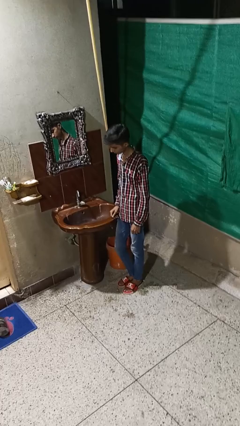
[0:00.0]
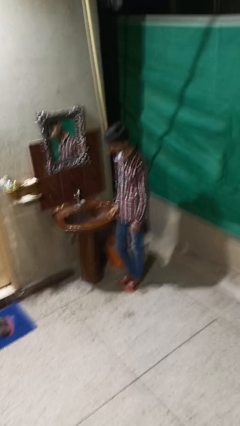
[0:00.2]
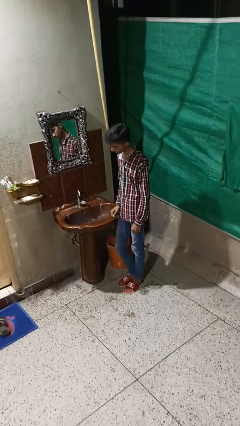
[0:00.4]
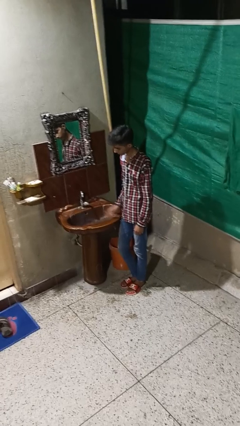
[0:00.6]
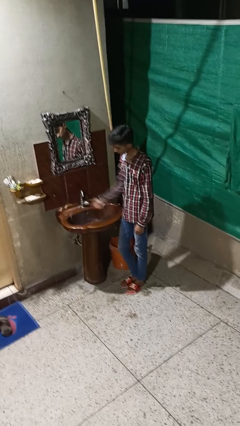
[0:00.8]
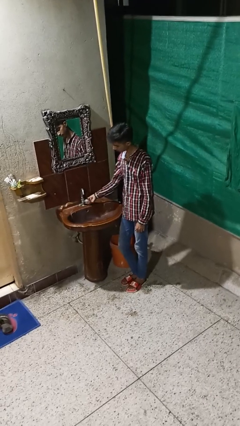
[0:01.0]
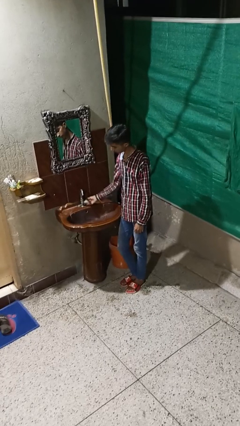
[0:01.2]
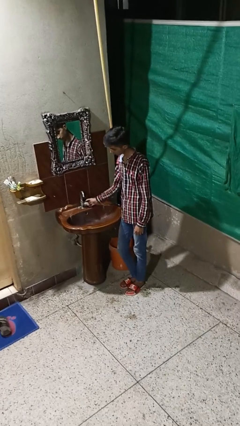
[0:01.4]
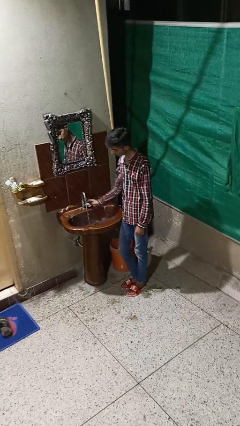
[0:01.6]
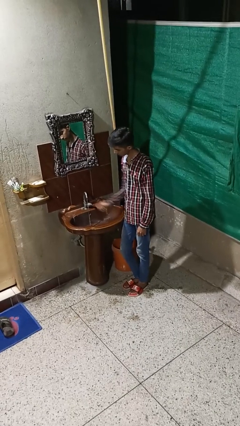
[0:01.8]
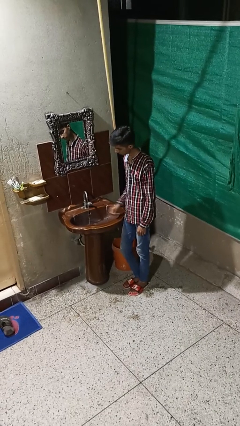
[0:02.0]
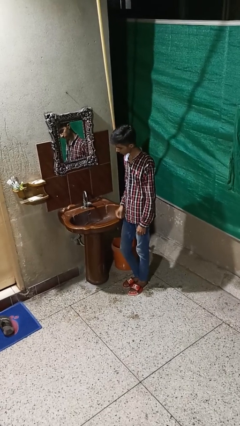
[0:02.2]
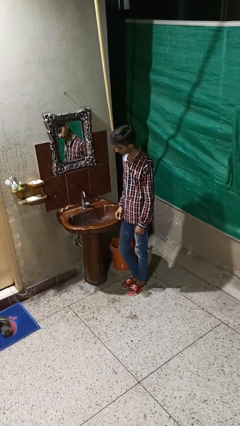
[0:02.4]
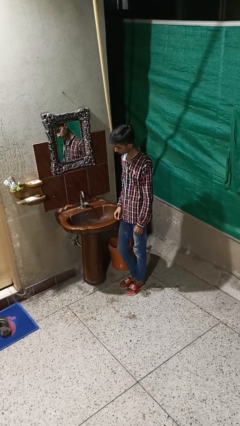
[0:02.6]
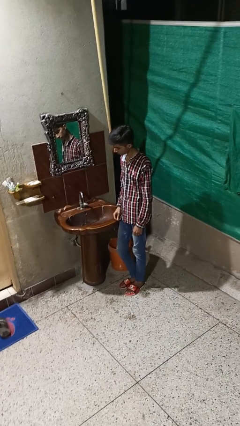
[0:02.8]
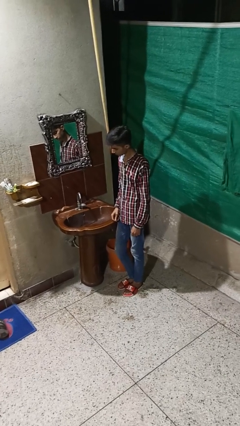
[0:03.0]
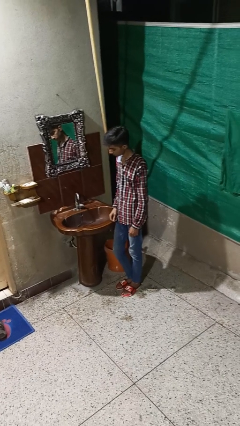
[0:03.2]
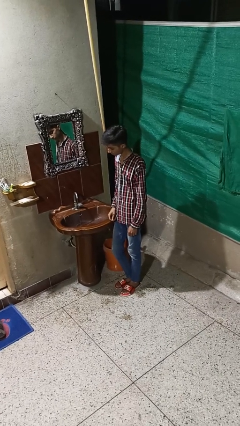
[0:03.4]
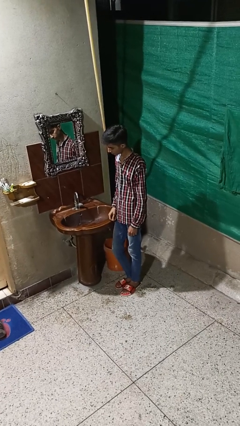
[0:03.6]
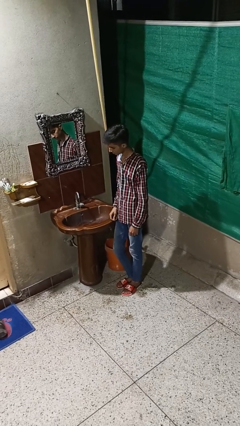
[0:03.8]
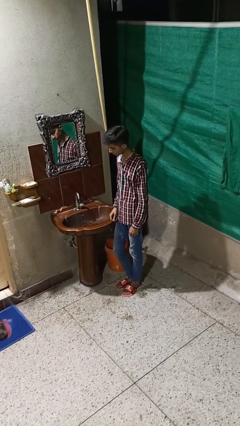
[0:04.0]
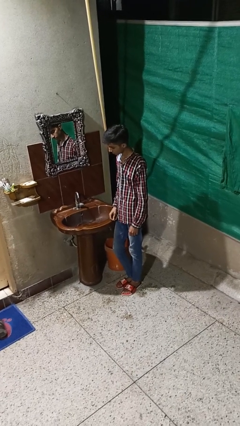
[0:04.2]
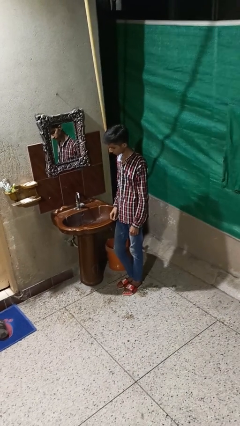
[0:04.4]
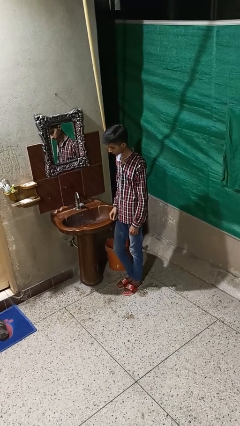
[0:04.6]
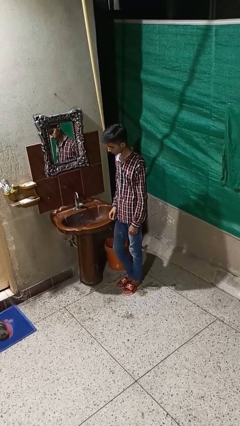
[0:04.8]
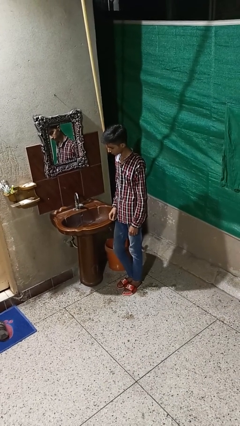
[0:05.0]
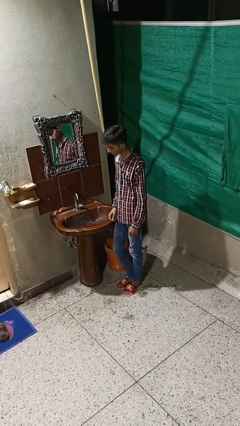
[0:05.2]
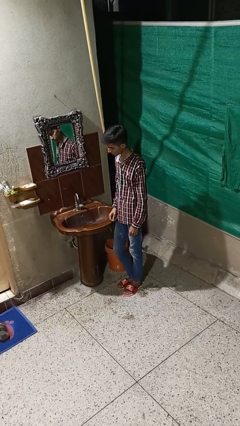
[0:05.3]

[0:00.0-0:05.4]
person turns on faucet

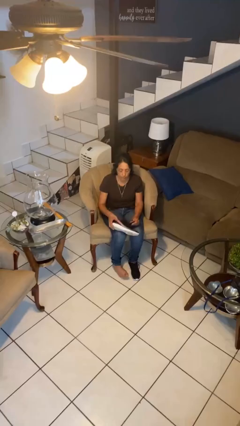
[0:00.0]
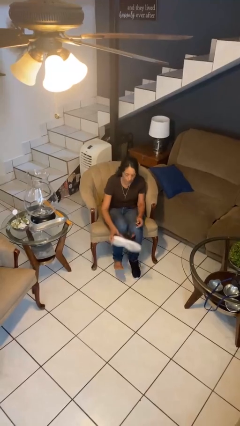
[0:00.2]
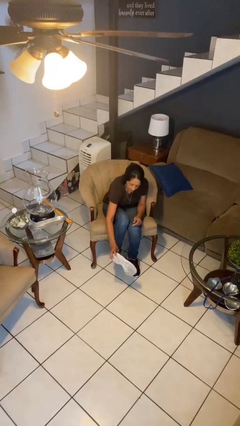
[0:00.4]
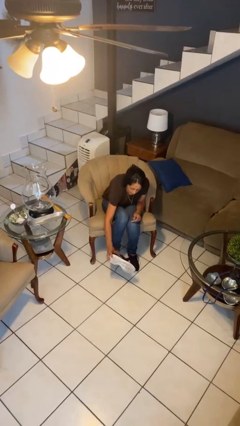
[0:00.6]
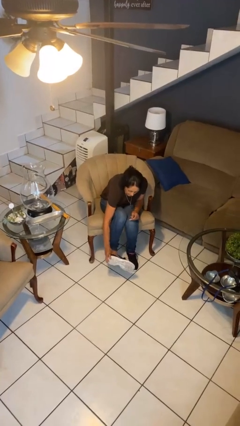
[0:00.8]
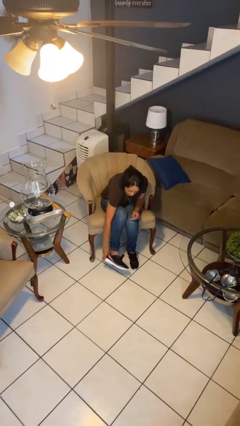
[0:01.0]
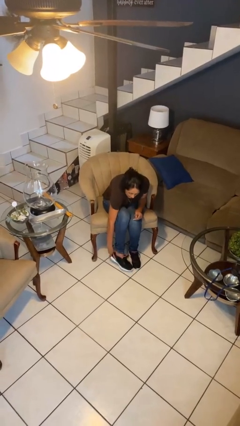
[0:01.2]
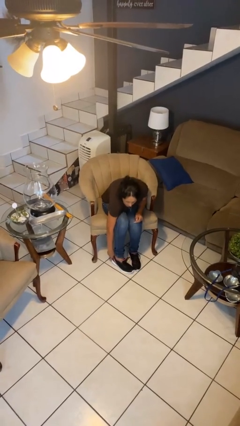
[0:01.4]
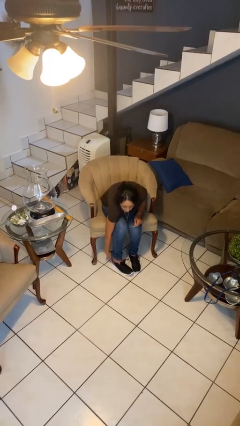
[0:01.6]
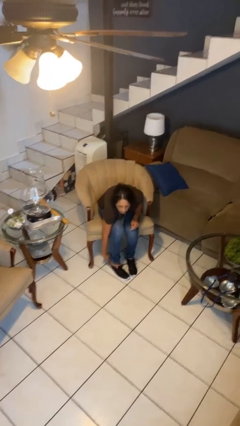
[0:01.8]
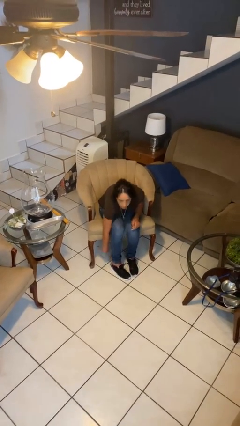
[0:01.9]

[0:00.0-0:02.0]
person puts on shoes

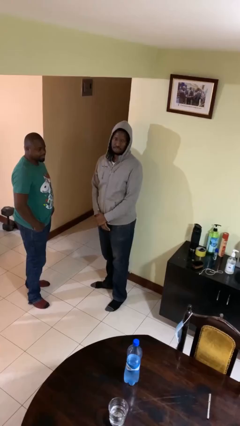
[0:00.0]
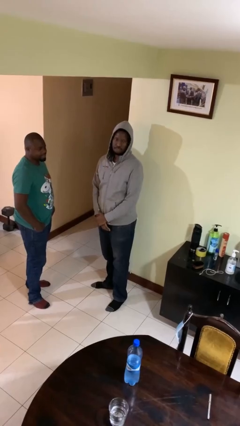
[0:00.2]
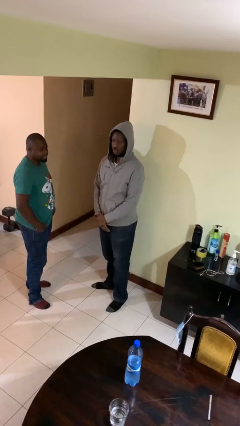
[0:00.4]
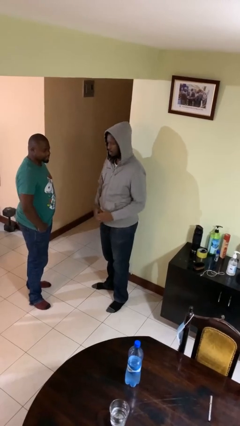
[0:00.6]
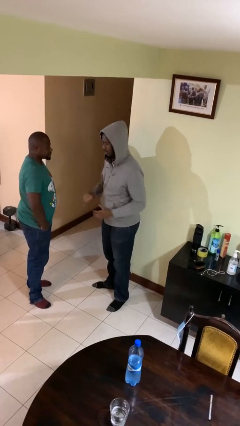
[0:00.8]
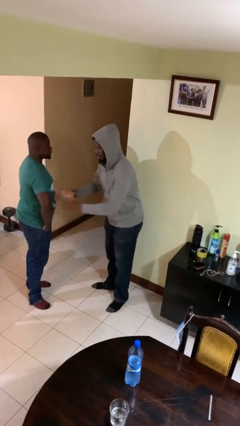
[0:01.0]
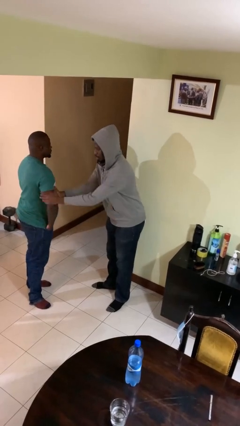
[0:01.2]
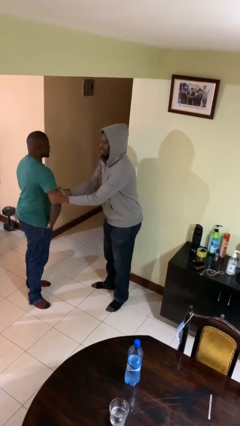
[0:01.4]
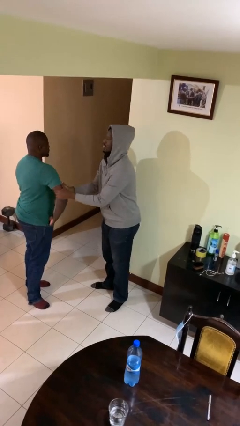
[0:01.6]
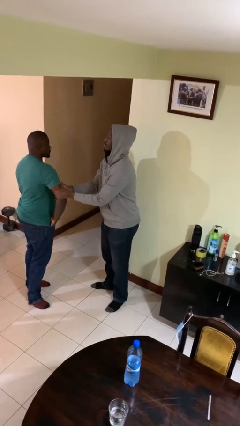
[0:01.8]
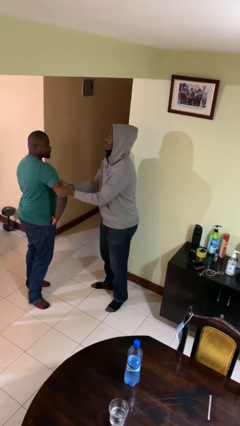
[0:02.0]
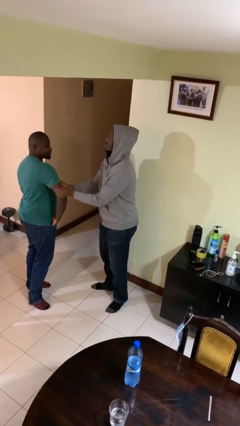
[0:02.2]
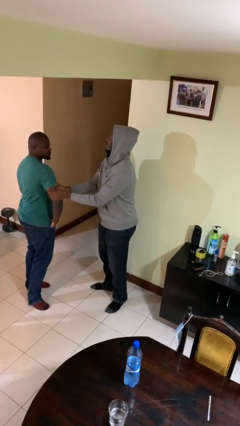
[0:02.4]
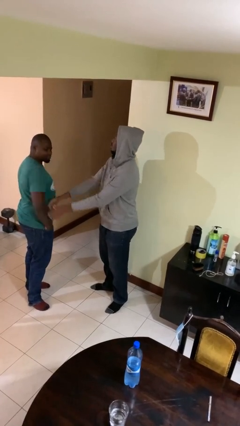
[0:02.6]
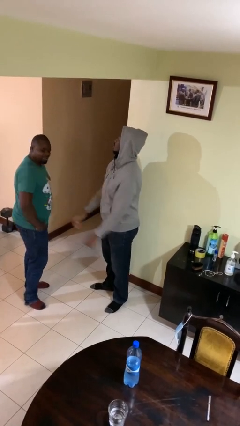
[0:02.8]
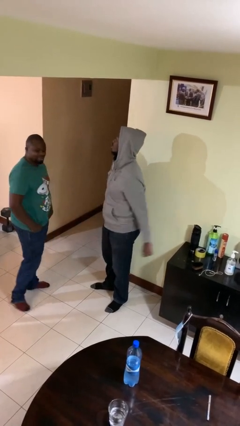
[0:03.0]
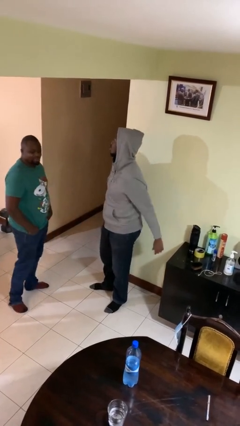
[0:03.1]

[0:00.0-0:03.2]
person grabs person by bicep

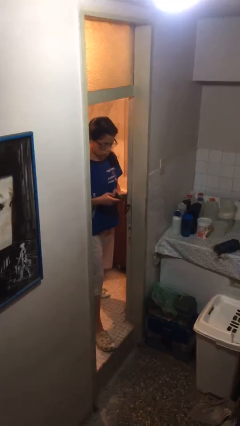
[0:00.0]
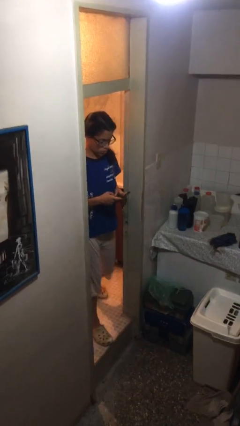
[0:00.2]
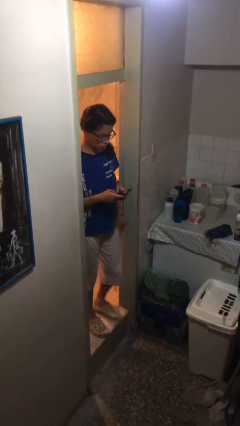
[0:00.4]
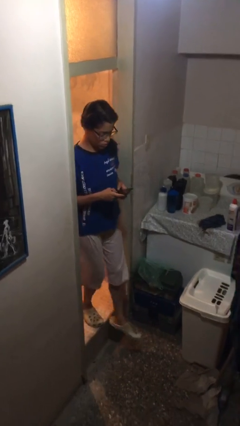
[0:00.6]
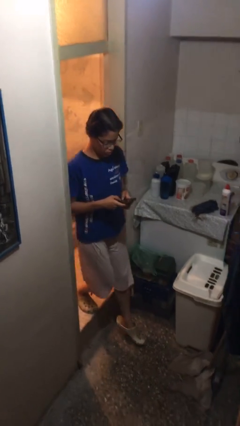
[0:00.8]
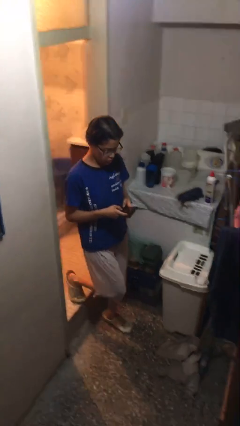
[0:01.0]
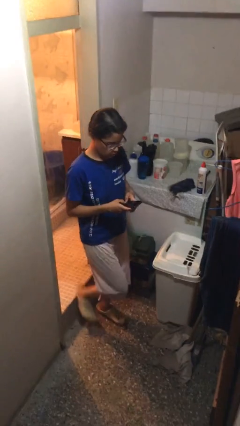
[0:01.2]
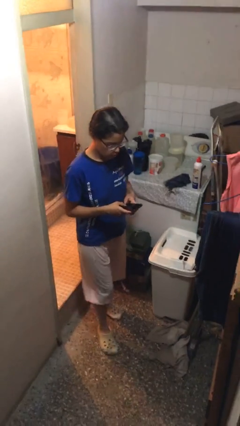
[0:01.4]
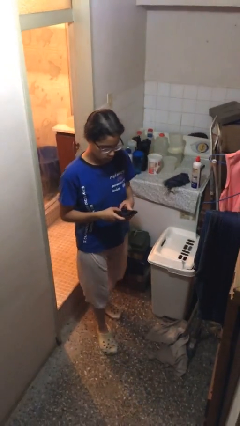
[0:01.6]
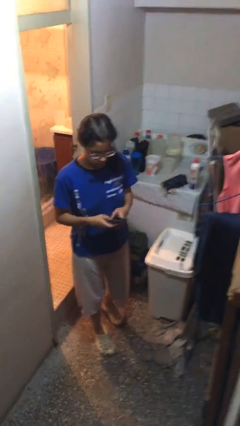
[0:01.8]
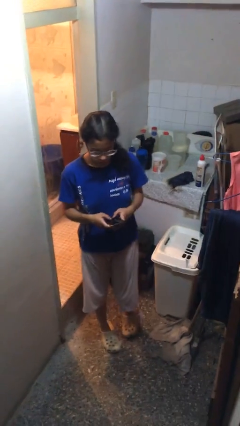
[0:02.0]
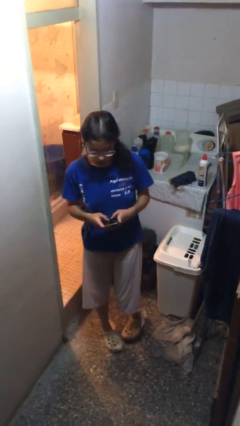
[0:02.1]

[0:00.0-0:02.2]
person enters scene through structure

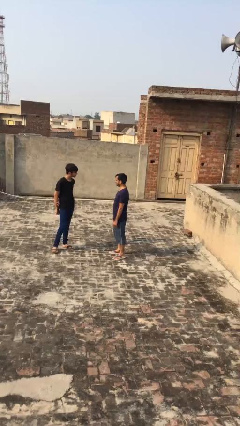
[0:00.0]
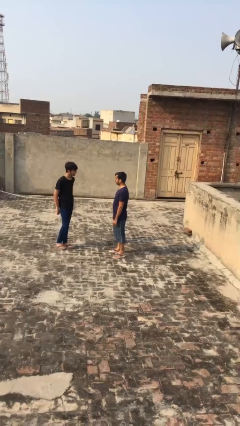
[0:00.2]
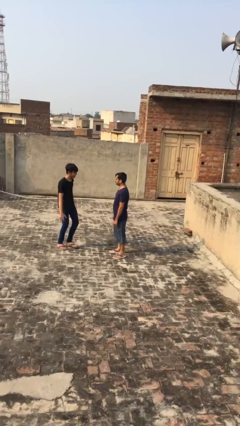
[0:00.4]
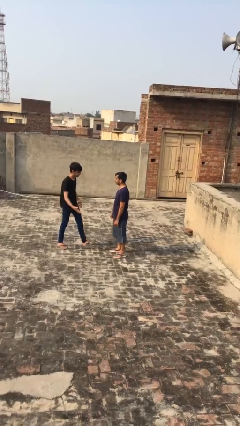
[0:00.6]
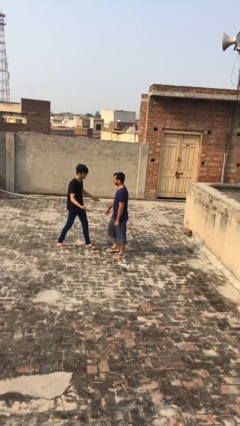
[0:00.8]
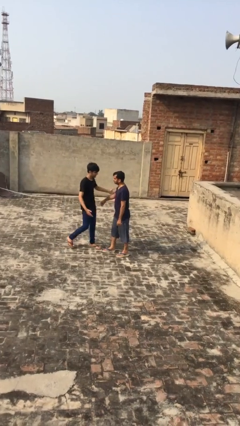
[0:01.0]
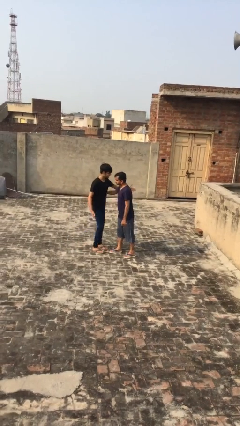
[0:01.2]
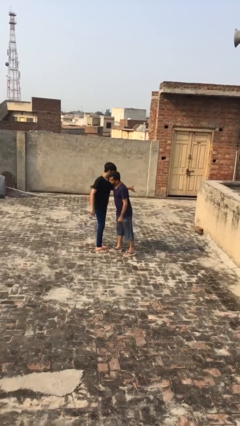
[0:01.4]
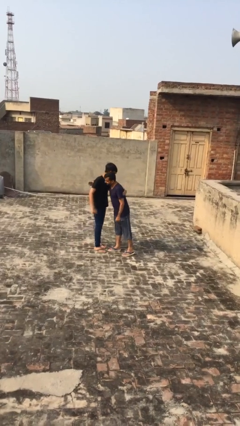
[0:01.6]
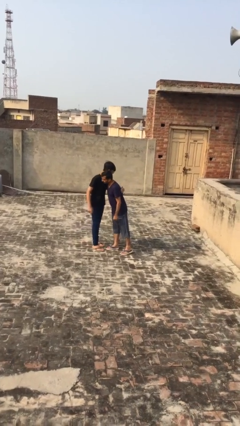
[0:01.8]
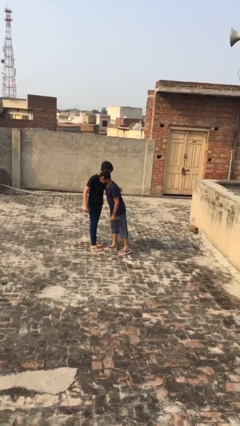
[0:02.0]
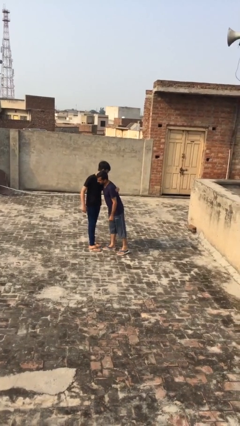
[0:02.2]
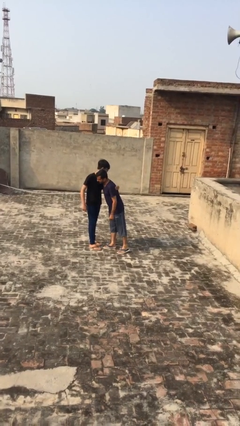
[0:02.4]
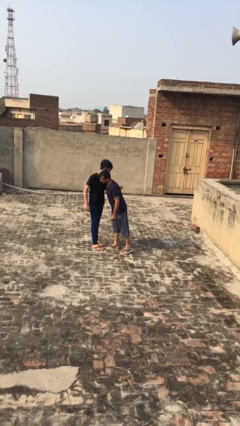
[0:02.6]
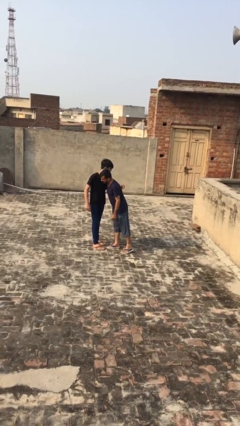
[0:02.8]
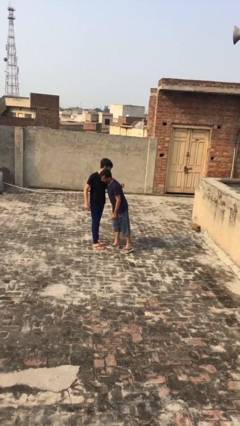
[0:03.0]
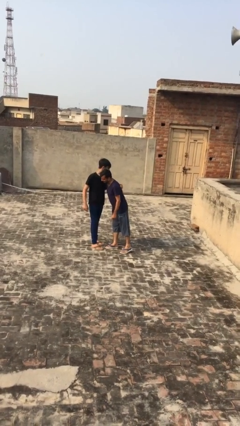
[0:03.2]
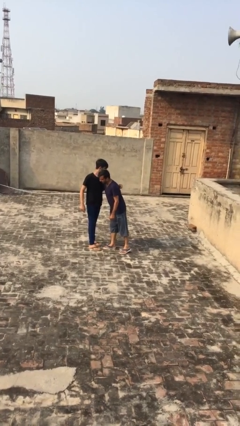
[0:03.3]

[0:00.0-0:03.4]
person embraces person

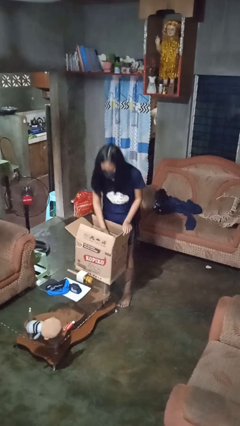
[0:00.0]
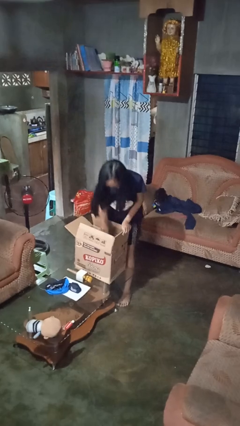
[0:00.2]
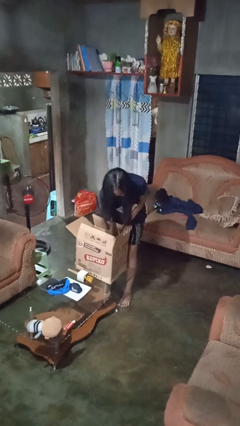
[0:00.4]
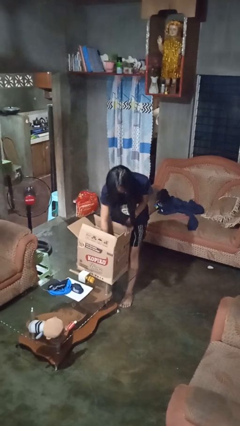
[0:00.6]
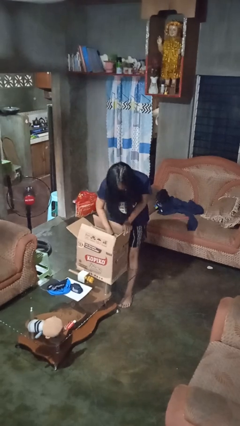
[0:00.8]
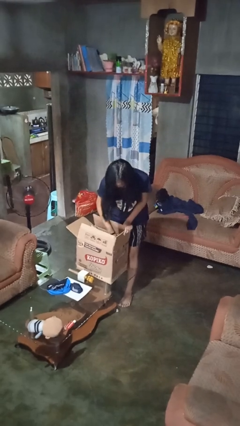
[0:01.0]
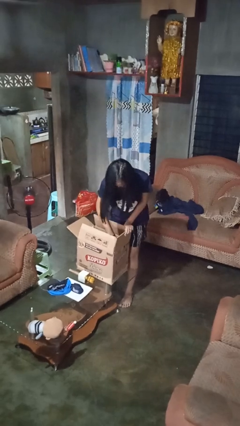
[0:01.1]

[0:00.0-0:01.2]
person searches in box
